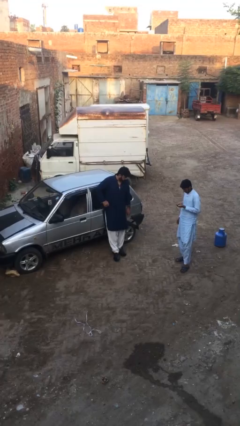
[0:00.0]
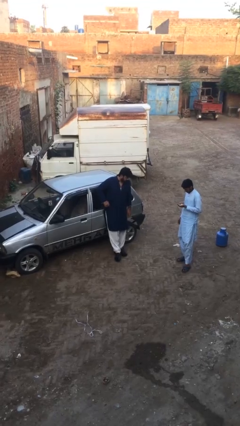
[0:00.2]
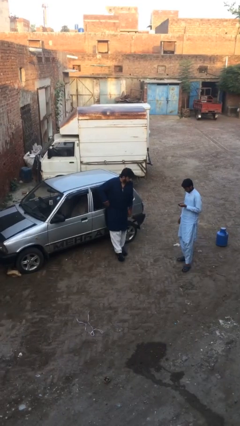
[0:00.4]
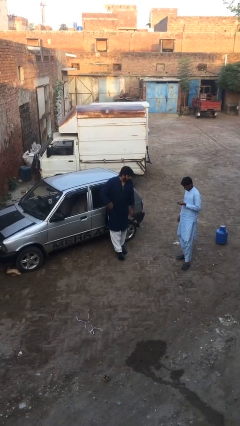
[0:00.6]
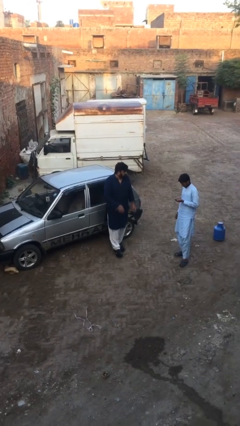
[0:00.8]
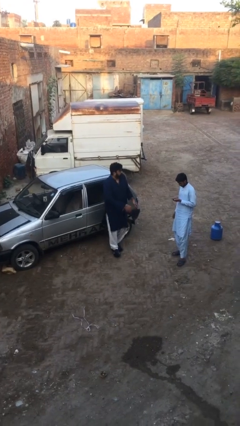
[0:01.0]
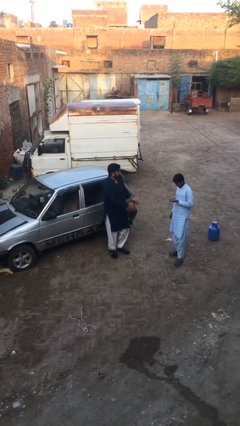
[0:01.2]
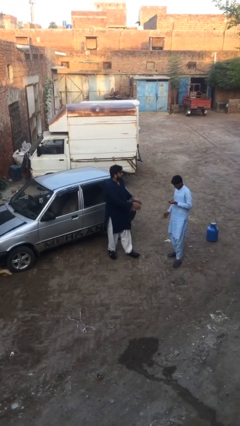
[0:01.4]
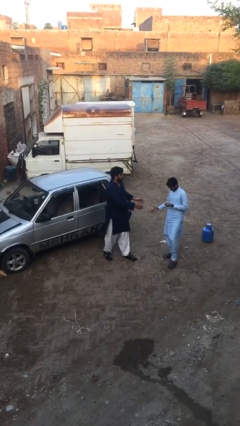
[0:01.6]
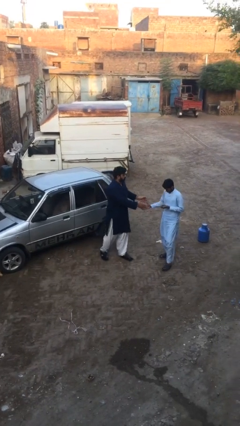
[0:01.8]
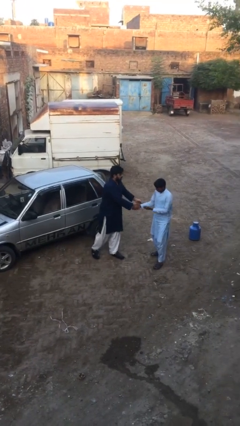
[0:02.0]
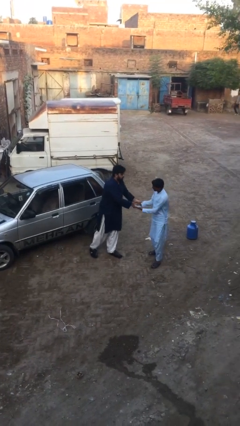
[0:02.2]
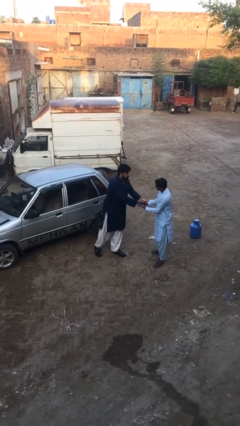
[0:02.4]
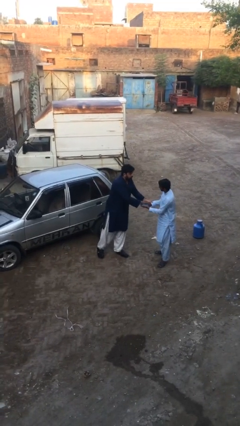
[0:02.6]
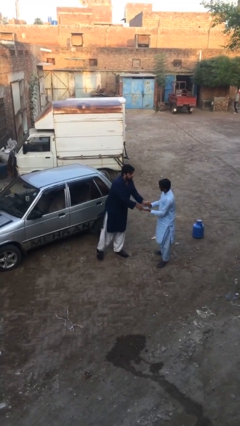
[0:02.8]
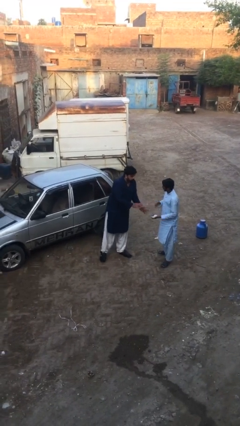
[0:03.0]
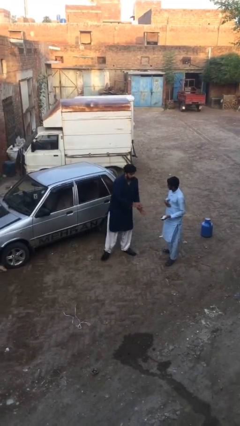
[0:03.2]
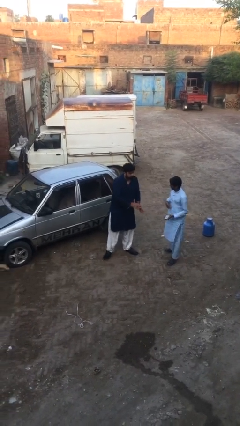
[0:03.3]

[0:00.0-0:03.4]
person shakes hand

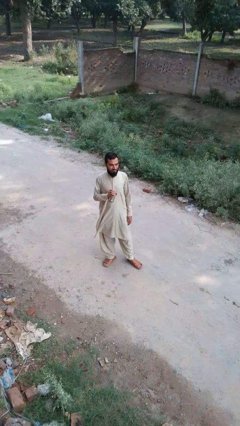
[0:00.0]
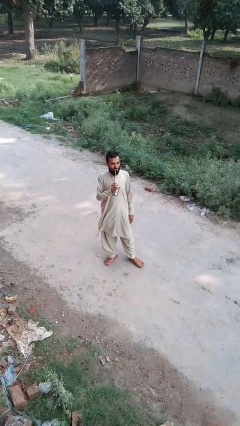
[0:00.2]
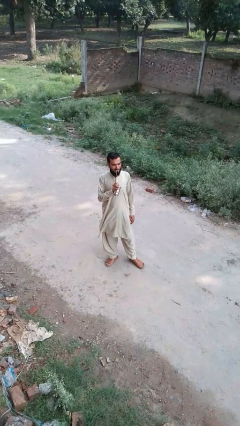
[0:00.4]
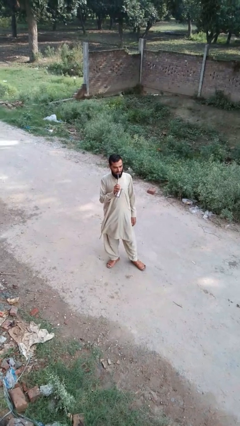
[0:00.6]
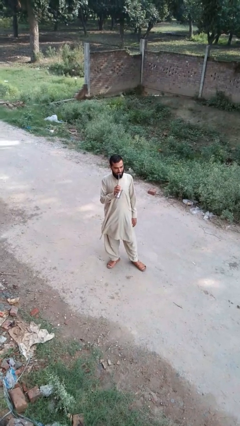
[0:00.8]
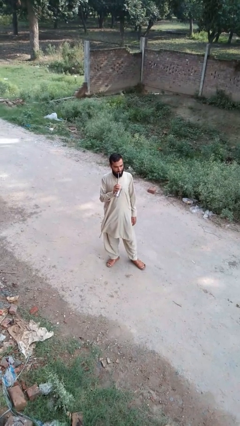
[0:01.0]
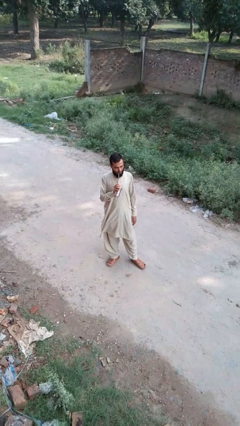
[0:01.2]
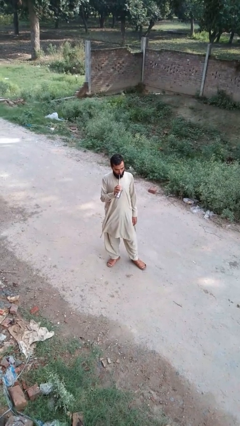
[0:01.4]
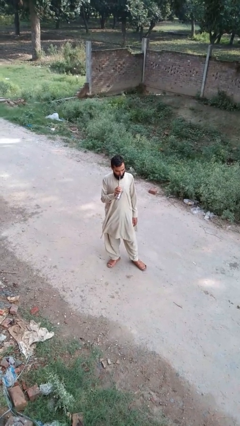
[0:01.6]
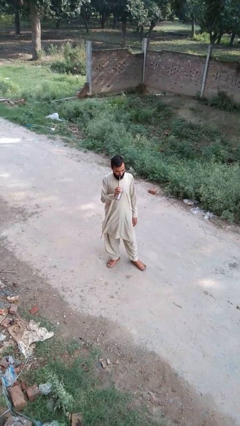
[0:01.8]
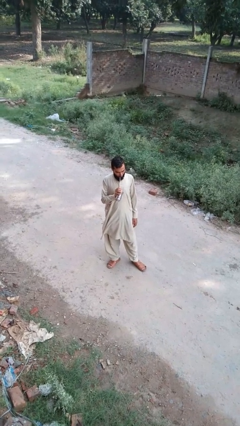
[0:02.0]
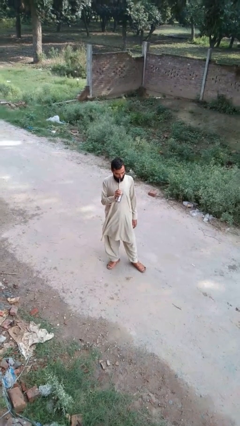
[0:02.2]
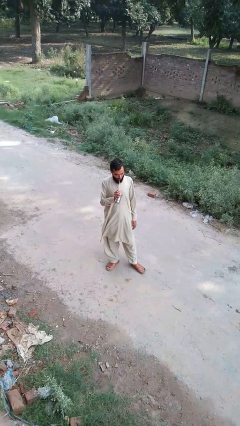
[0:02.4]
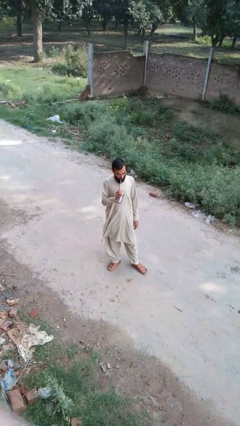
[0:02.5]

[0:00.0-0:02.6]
person drinks from straw

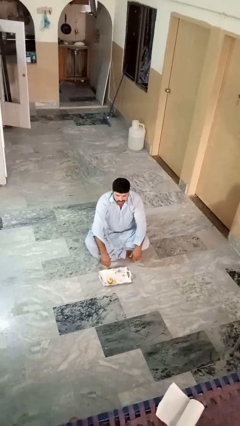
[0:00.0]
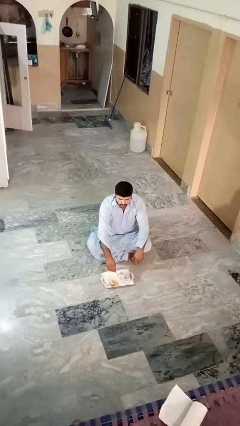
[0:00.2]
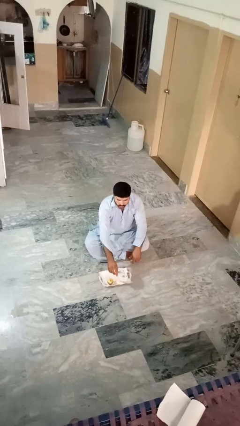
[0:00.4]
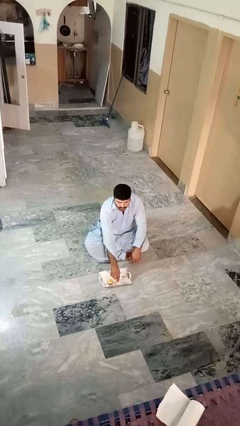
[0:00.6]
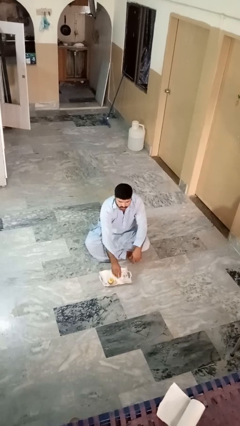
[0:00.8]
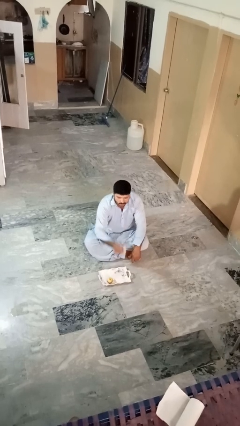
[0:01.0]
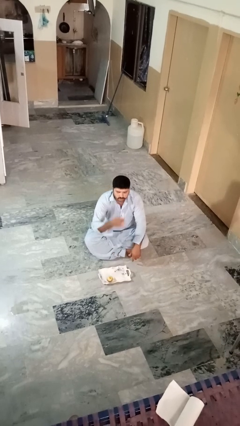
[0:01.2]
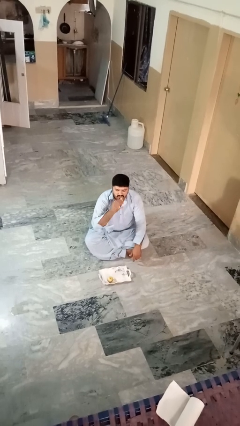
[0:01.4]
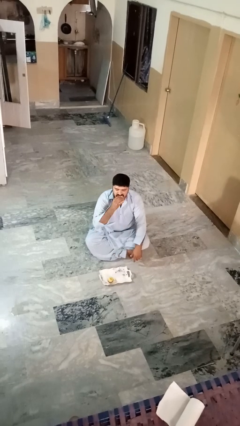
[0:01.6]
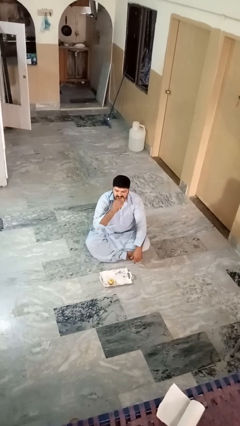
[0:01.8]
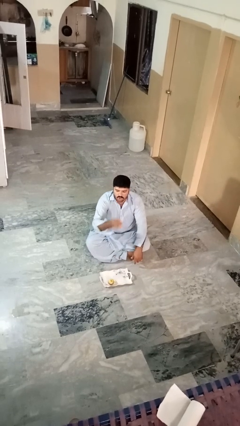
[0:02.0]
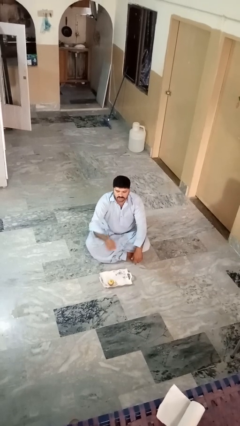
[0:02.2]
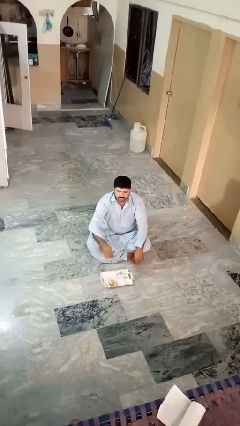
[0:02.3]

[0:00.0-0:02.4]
person eats apple

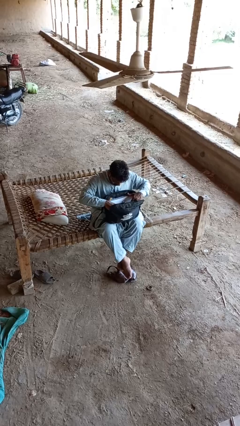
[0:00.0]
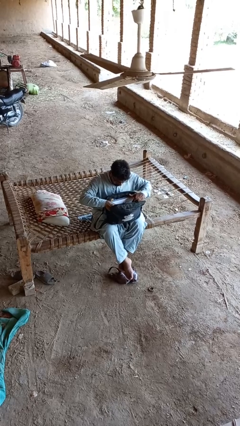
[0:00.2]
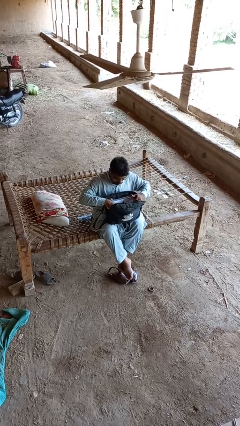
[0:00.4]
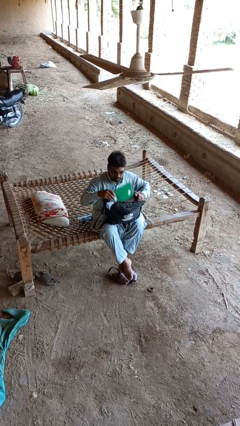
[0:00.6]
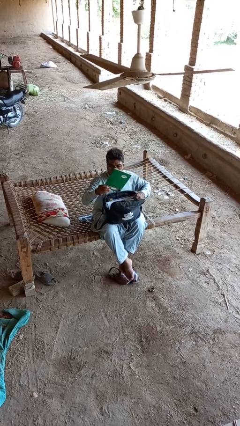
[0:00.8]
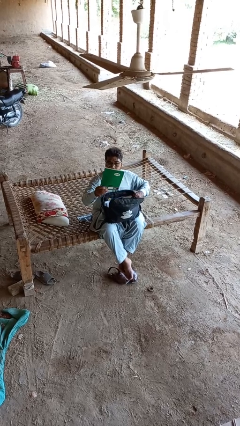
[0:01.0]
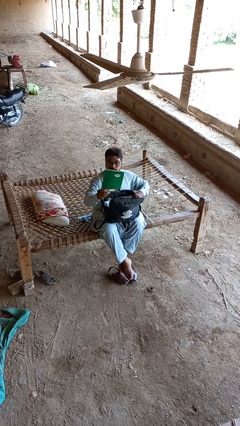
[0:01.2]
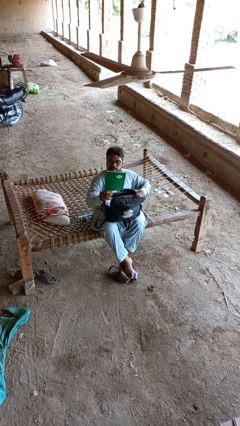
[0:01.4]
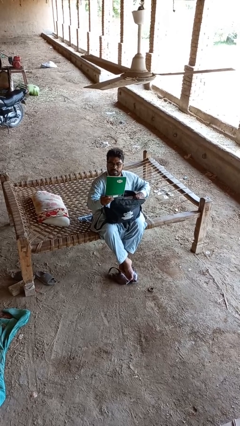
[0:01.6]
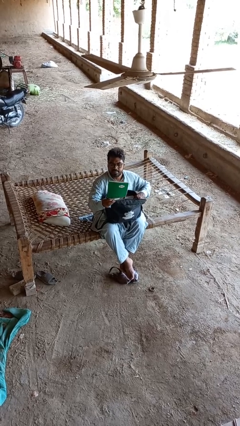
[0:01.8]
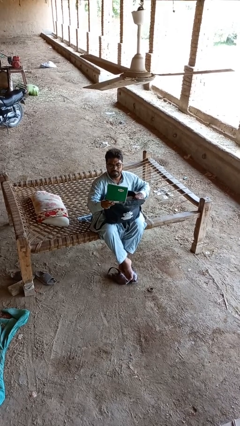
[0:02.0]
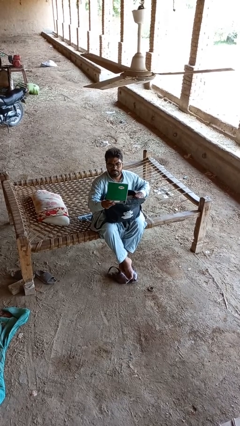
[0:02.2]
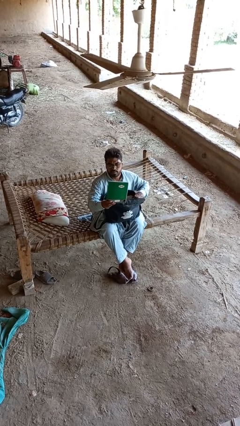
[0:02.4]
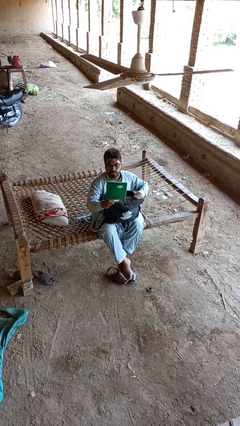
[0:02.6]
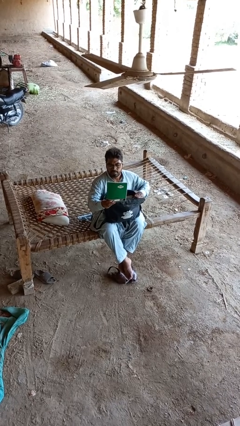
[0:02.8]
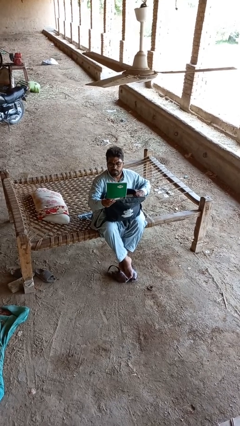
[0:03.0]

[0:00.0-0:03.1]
person takes object from backpack

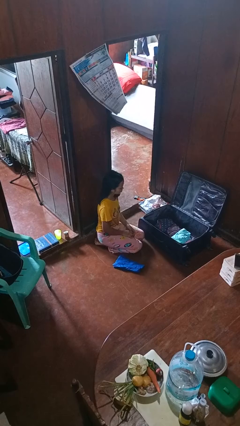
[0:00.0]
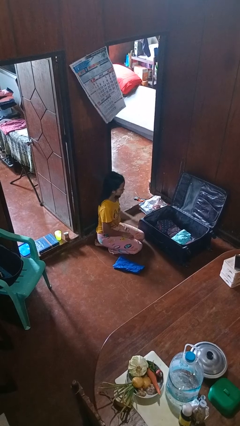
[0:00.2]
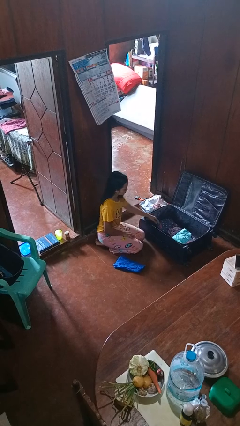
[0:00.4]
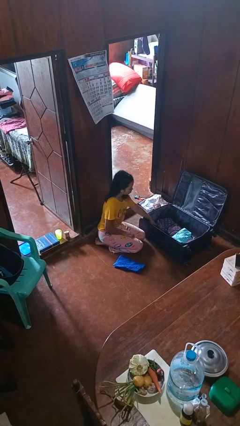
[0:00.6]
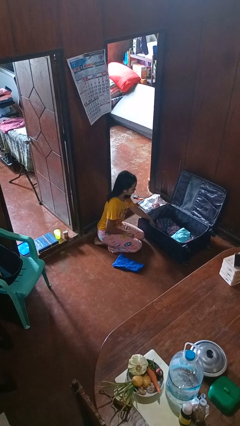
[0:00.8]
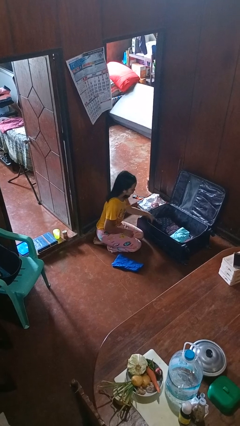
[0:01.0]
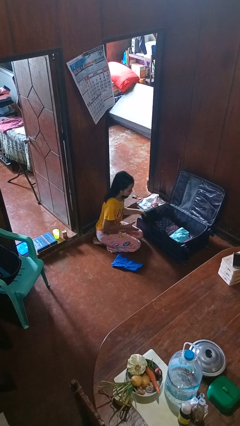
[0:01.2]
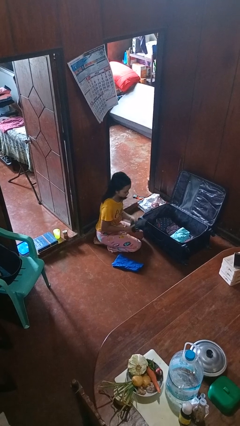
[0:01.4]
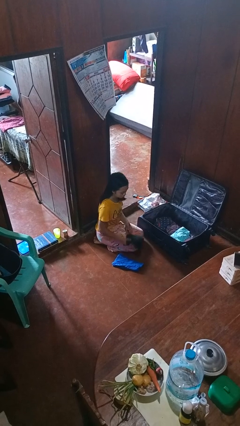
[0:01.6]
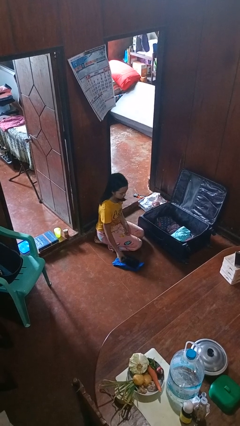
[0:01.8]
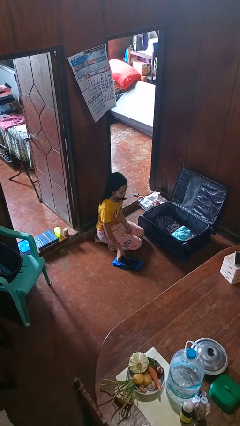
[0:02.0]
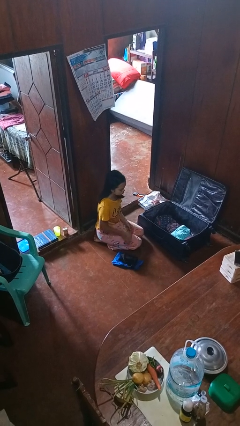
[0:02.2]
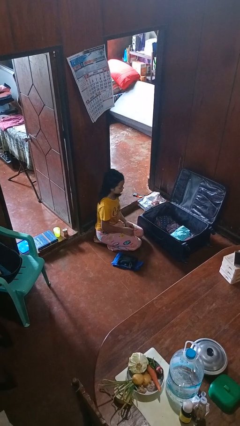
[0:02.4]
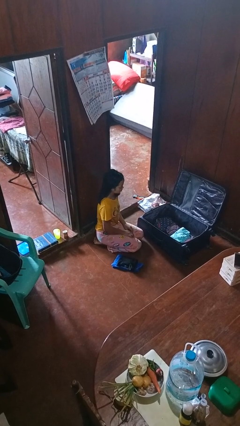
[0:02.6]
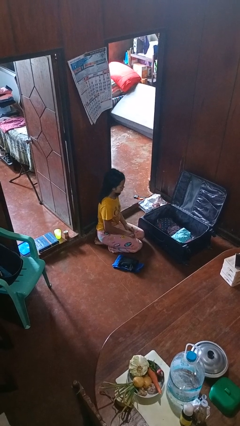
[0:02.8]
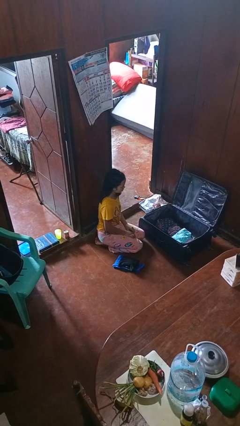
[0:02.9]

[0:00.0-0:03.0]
person unloads clothes from suitcase

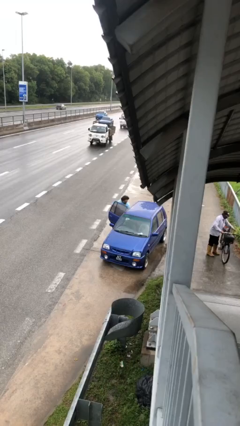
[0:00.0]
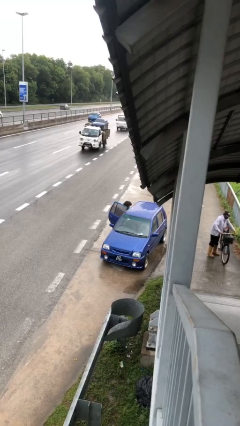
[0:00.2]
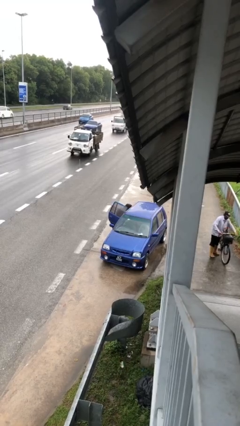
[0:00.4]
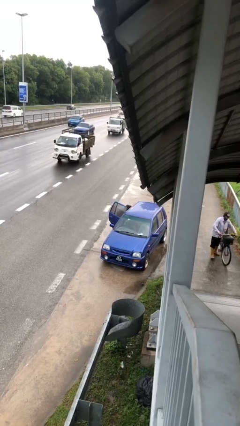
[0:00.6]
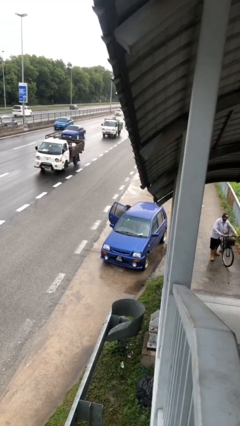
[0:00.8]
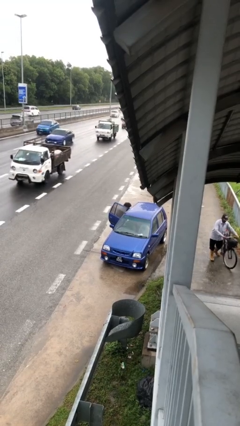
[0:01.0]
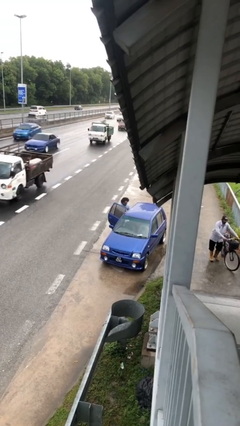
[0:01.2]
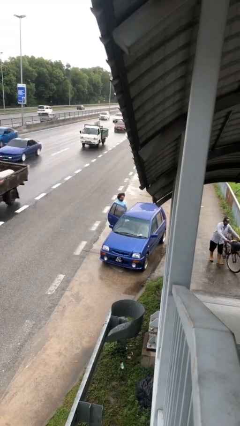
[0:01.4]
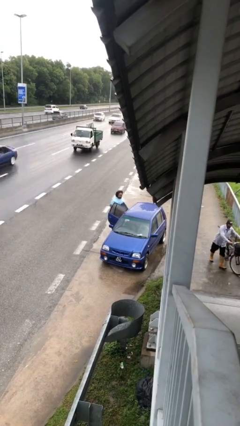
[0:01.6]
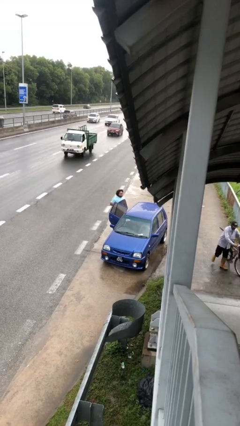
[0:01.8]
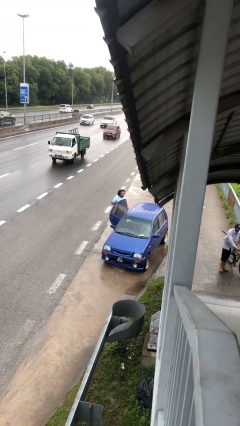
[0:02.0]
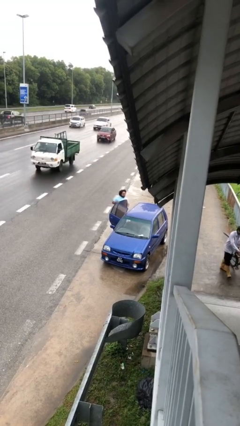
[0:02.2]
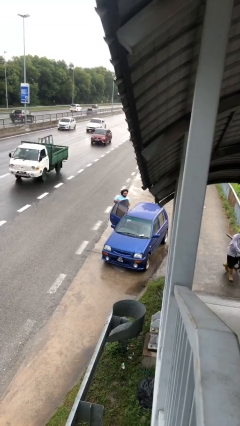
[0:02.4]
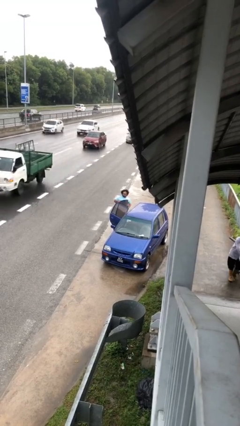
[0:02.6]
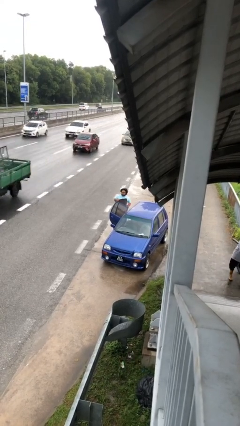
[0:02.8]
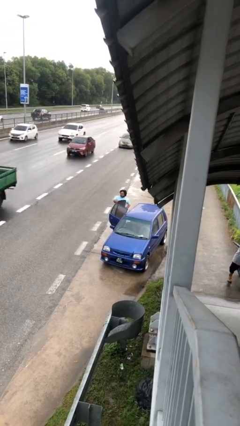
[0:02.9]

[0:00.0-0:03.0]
person unloads car

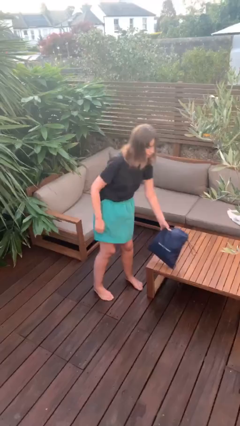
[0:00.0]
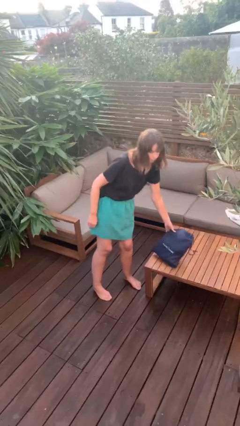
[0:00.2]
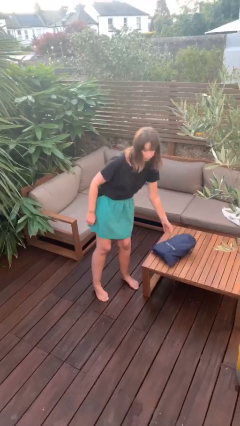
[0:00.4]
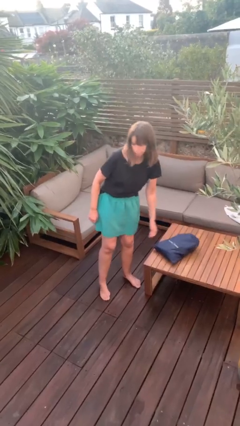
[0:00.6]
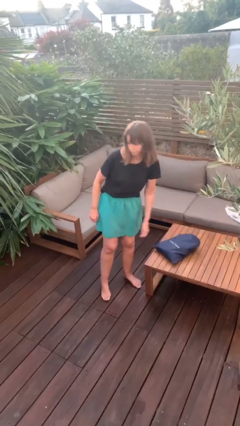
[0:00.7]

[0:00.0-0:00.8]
person puts down object on table
